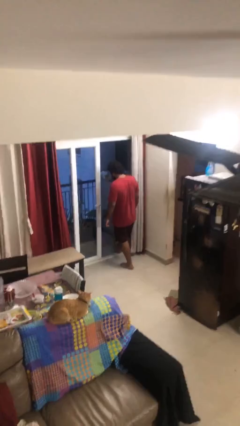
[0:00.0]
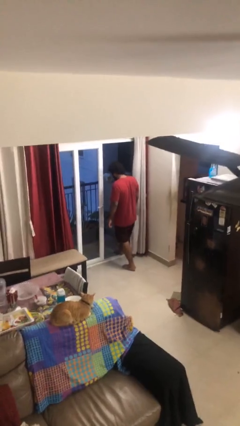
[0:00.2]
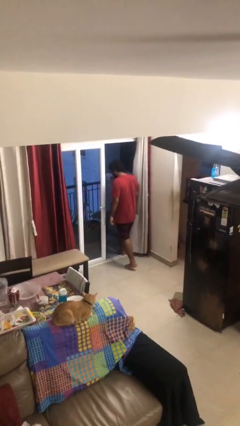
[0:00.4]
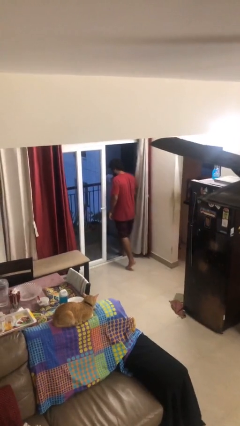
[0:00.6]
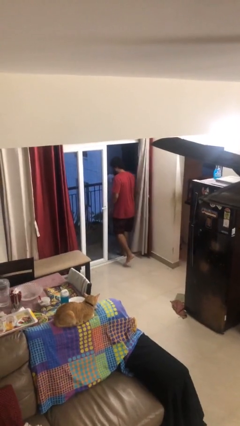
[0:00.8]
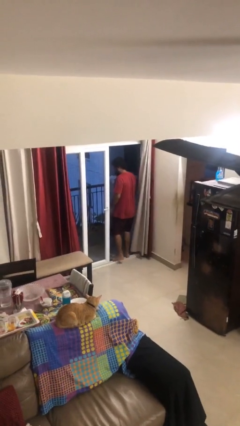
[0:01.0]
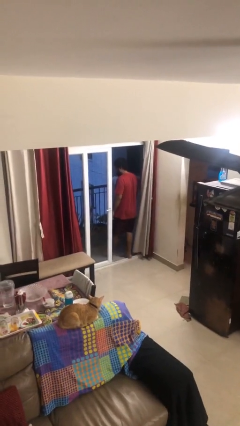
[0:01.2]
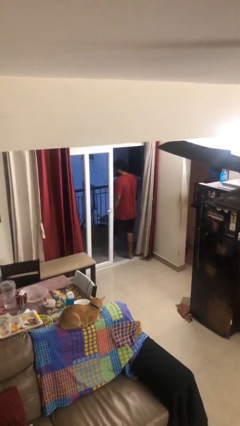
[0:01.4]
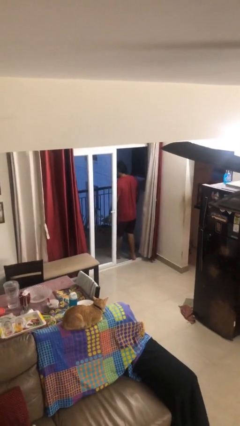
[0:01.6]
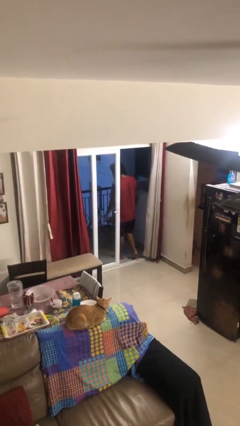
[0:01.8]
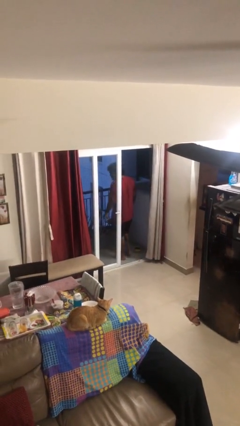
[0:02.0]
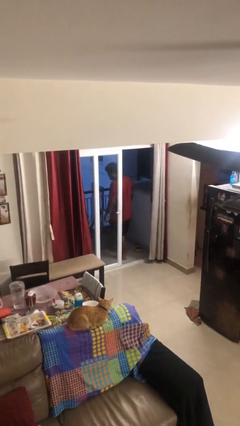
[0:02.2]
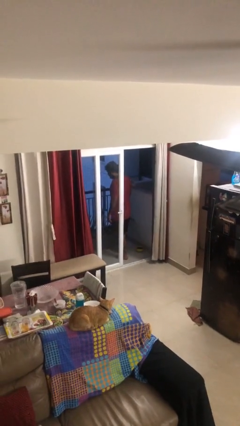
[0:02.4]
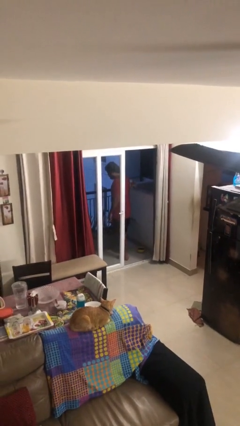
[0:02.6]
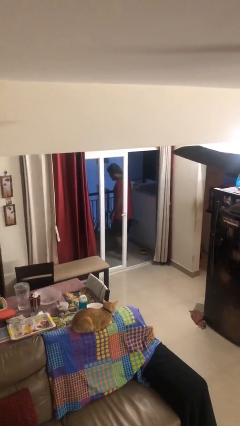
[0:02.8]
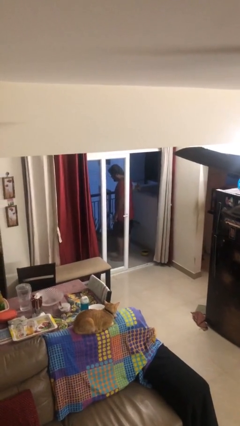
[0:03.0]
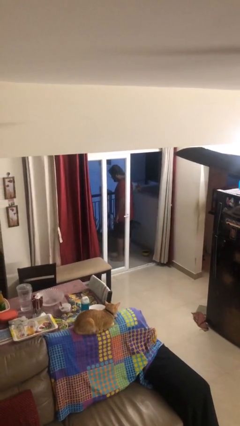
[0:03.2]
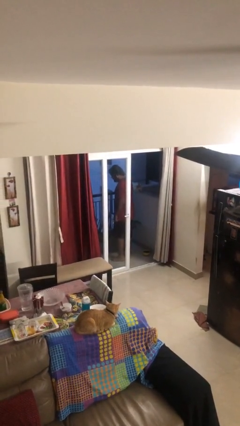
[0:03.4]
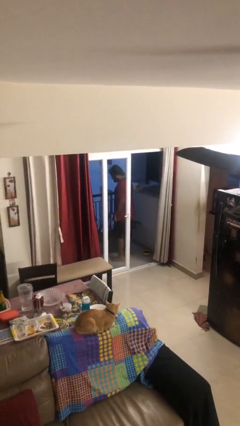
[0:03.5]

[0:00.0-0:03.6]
person exits scene through structure

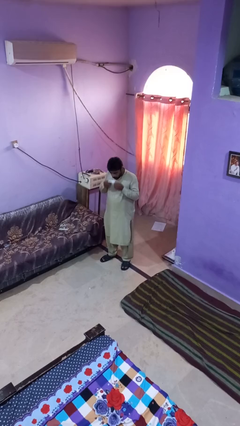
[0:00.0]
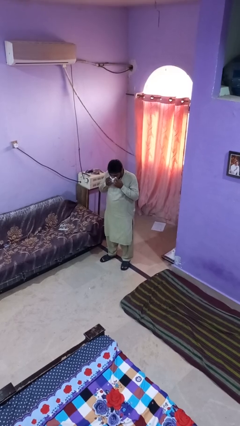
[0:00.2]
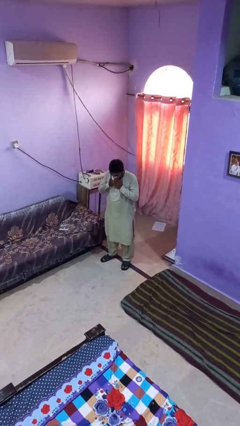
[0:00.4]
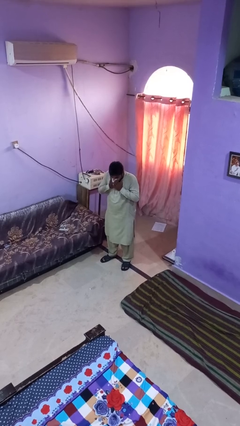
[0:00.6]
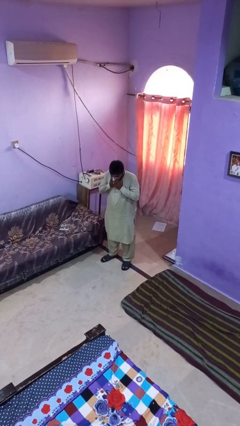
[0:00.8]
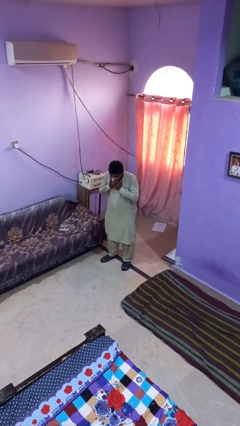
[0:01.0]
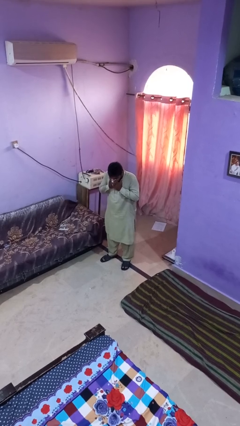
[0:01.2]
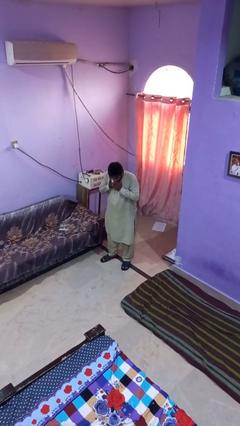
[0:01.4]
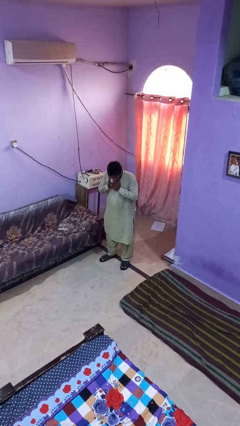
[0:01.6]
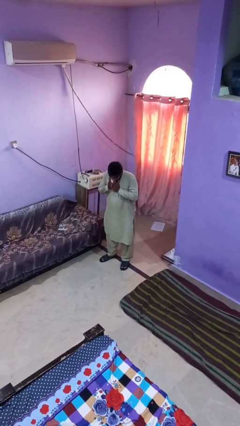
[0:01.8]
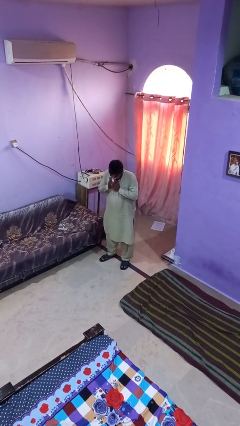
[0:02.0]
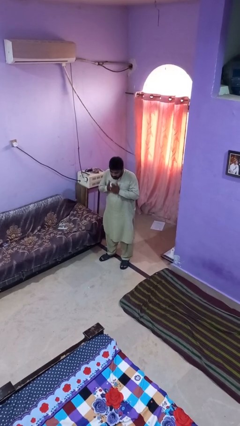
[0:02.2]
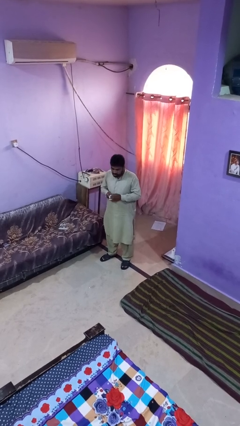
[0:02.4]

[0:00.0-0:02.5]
person blows nose

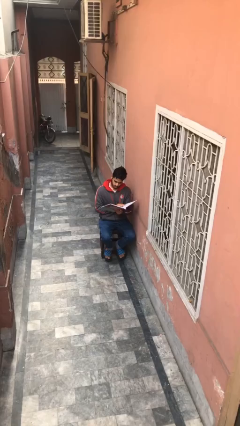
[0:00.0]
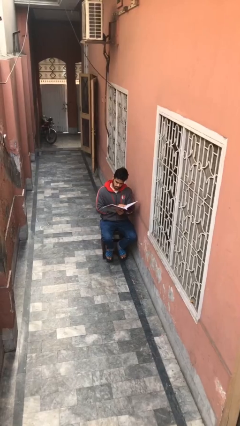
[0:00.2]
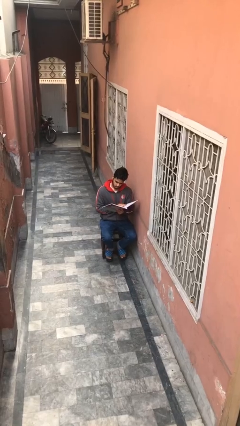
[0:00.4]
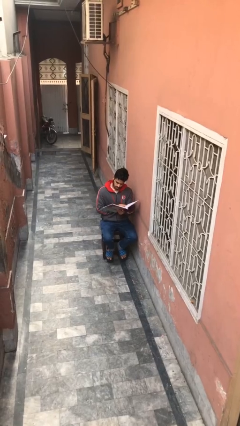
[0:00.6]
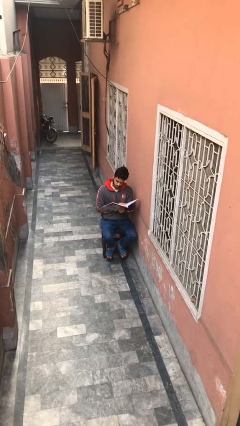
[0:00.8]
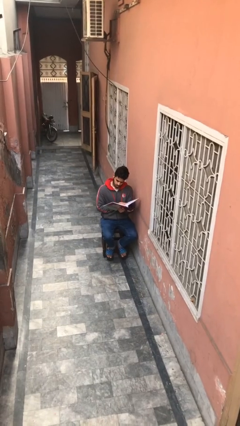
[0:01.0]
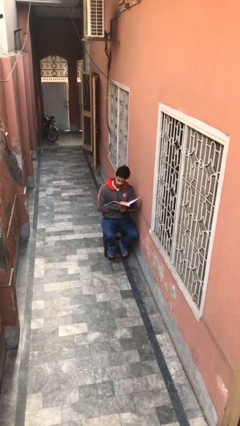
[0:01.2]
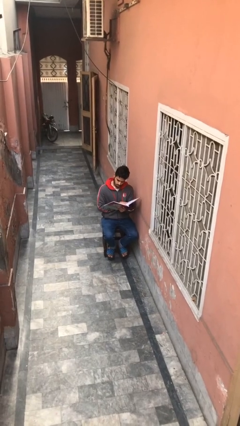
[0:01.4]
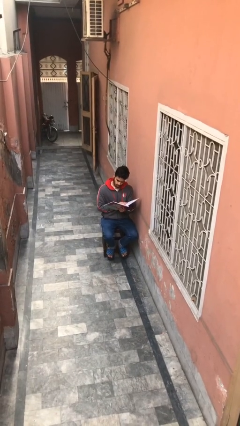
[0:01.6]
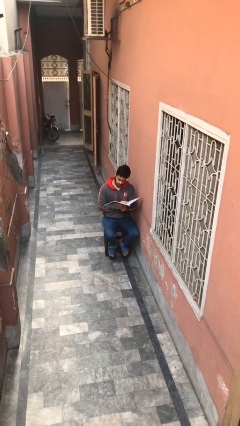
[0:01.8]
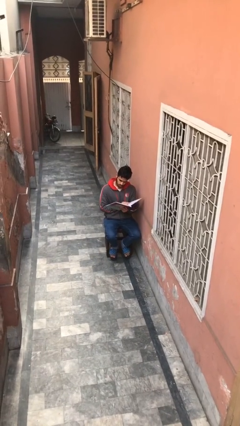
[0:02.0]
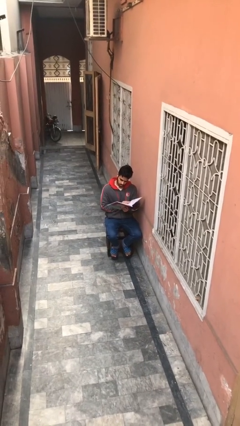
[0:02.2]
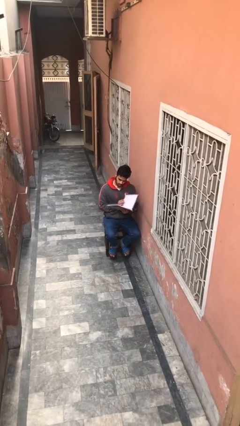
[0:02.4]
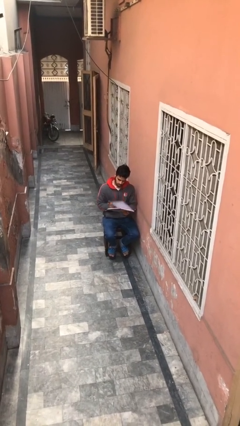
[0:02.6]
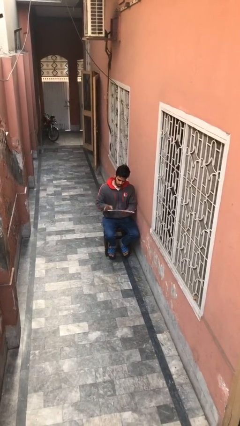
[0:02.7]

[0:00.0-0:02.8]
person reads document

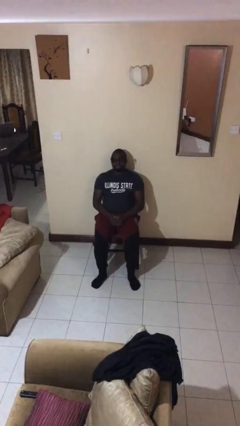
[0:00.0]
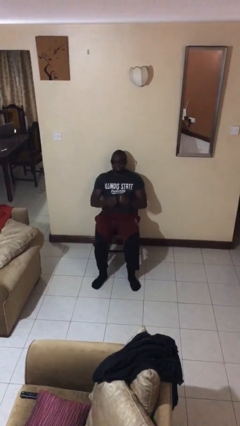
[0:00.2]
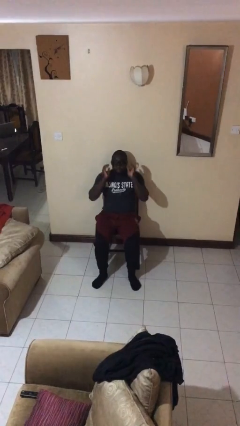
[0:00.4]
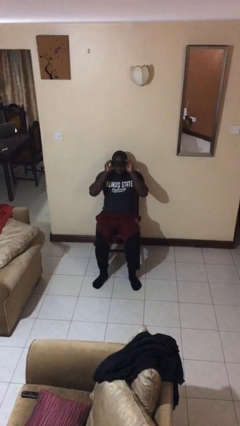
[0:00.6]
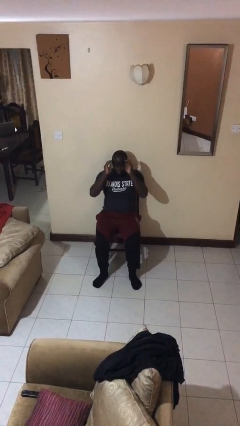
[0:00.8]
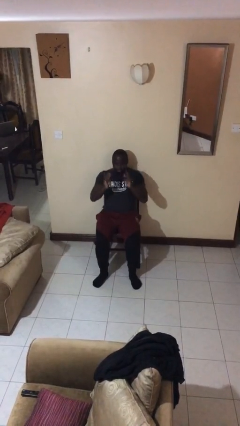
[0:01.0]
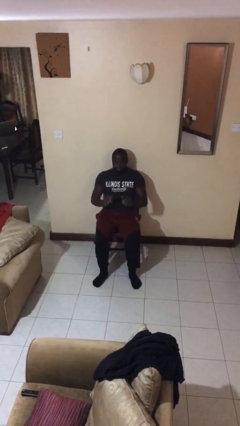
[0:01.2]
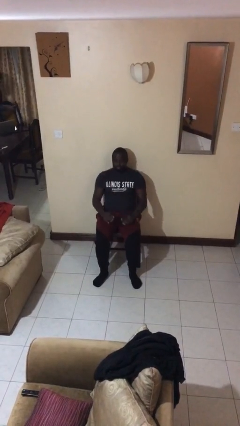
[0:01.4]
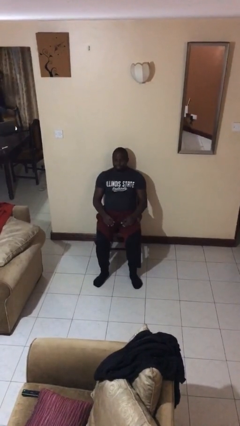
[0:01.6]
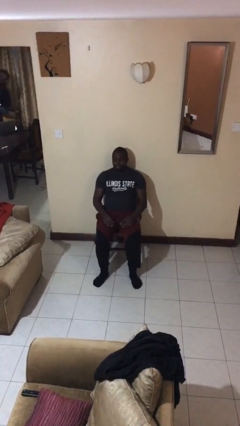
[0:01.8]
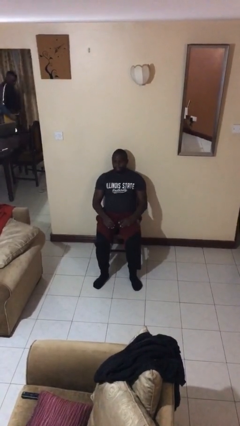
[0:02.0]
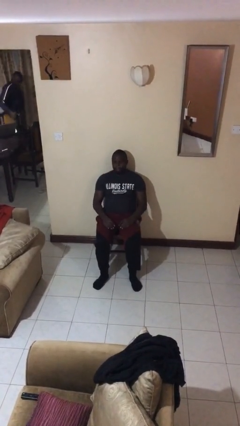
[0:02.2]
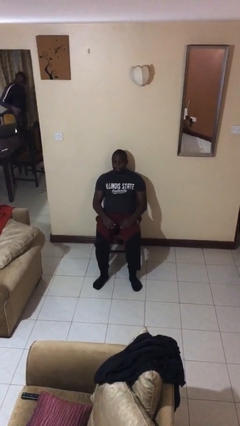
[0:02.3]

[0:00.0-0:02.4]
person takes off glasses

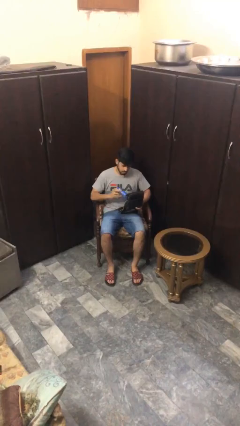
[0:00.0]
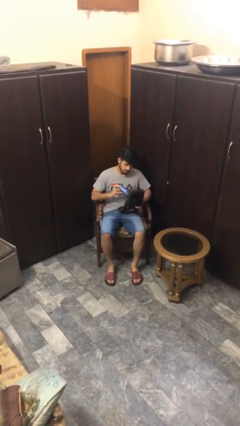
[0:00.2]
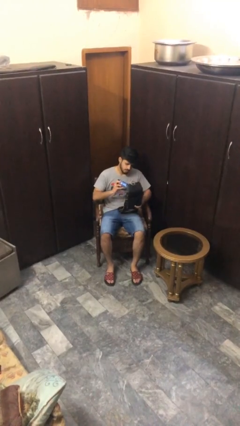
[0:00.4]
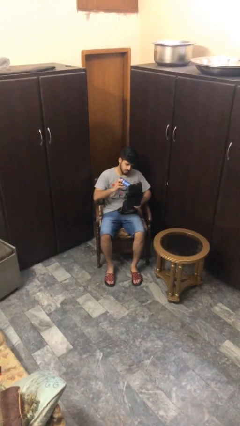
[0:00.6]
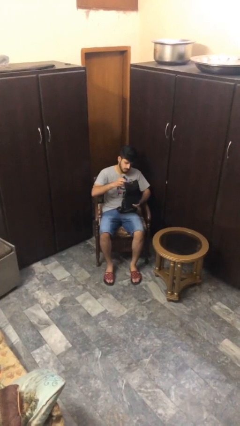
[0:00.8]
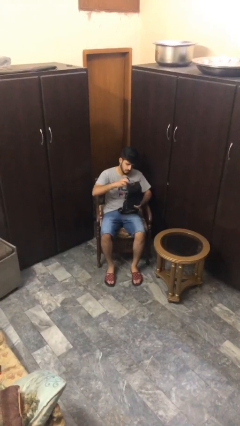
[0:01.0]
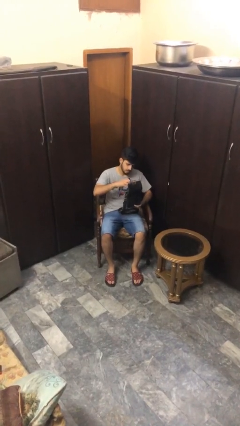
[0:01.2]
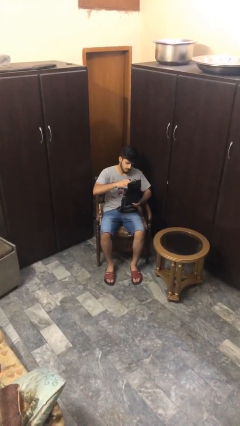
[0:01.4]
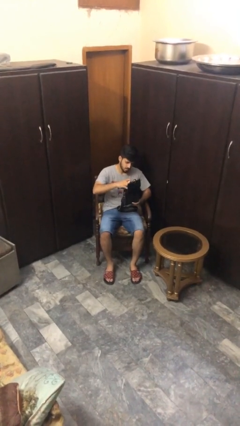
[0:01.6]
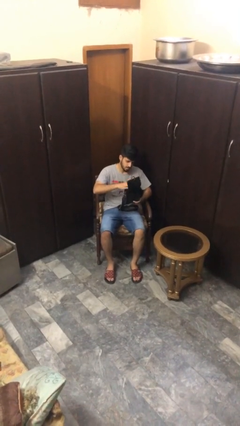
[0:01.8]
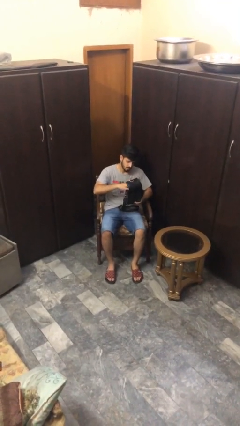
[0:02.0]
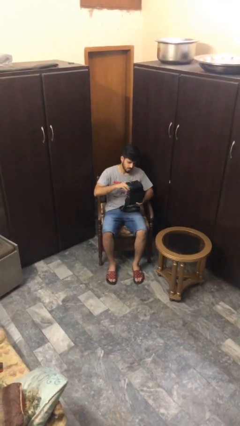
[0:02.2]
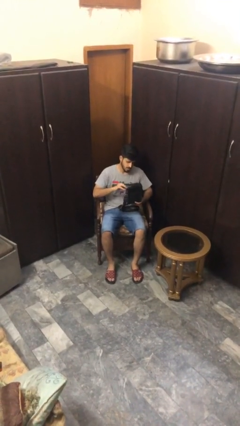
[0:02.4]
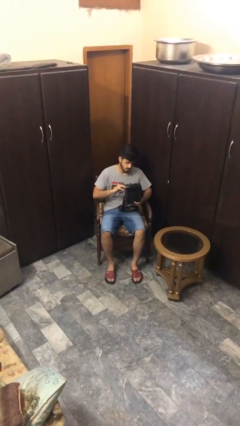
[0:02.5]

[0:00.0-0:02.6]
person puts object into purse

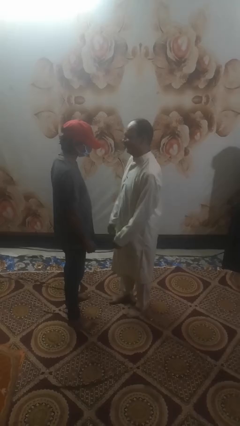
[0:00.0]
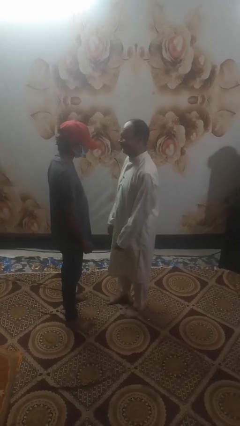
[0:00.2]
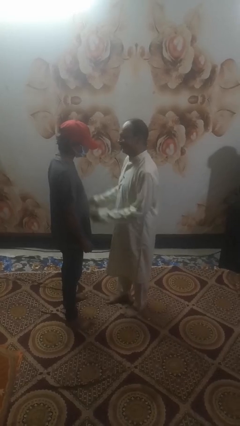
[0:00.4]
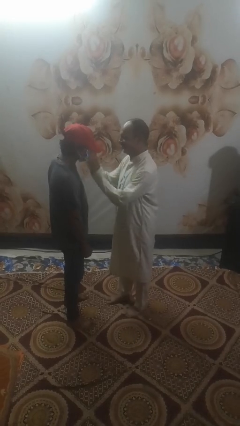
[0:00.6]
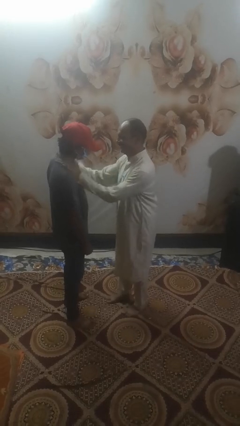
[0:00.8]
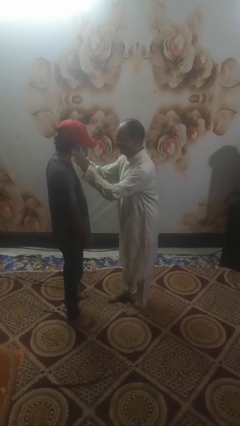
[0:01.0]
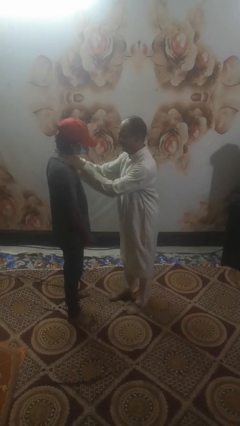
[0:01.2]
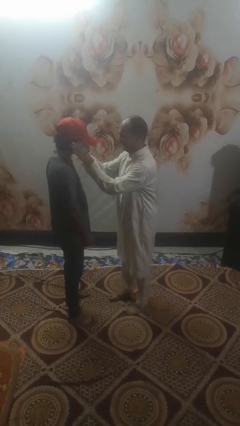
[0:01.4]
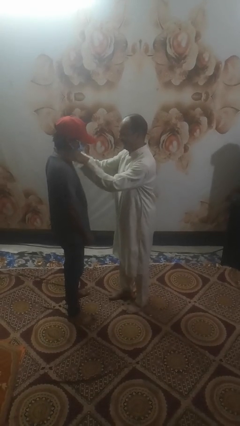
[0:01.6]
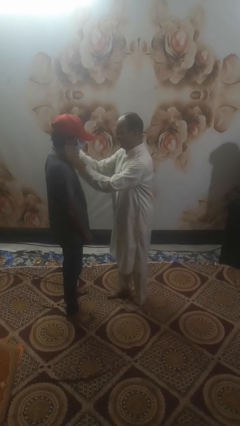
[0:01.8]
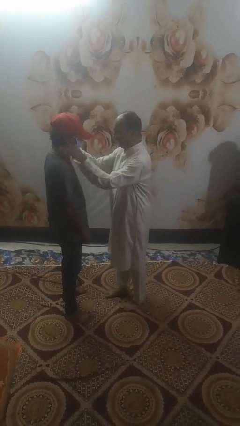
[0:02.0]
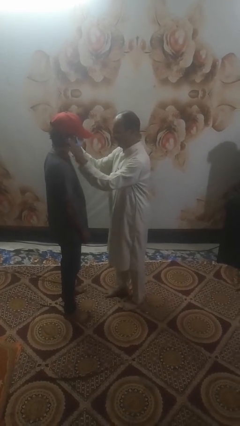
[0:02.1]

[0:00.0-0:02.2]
person pounds shoulders of person

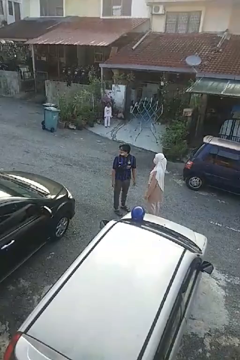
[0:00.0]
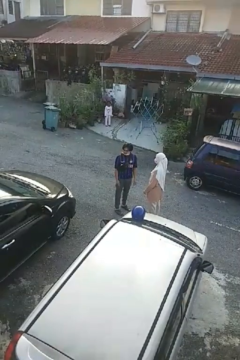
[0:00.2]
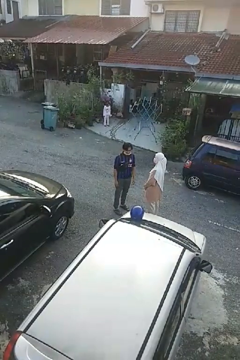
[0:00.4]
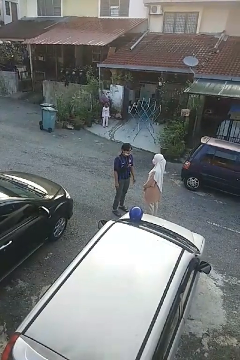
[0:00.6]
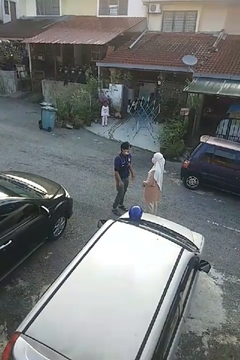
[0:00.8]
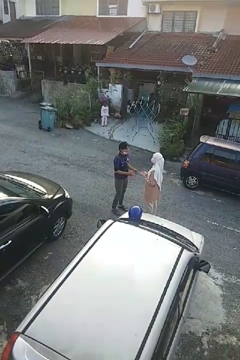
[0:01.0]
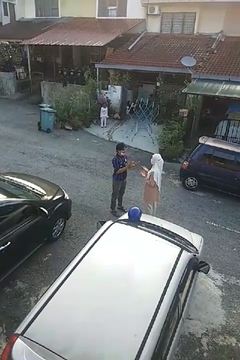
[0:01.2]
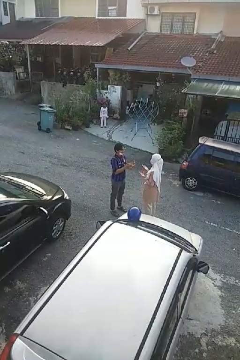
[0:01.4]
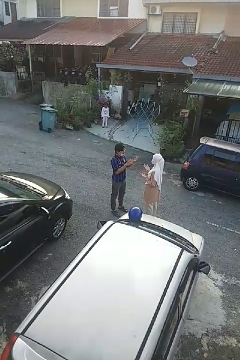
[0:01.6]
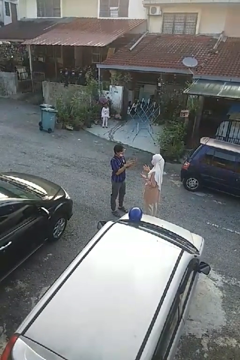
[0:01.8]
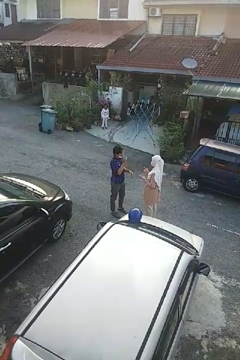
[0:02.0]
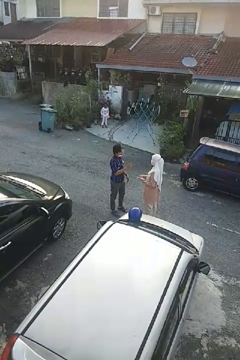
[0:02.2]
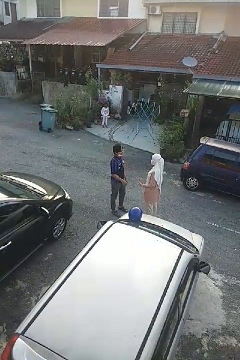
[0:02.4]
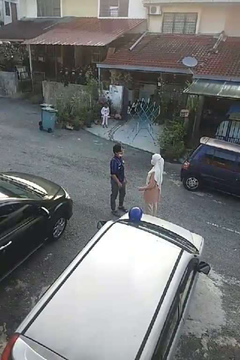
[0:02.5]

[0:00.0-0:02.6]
person talks to person
